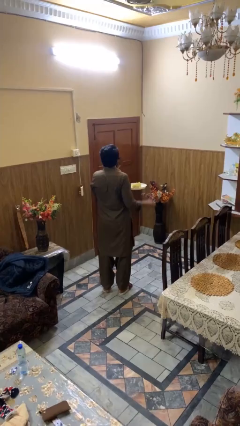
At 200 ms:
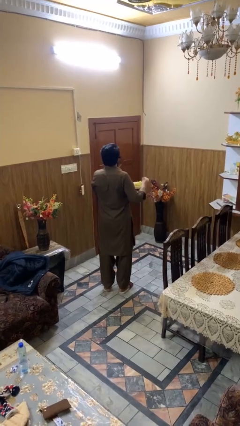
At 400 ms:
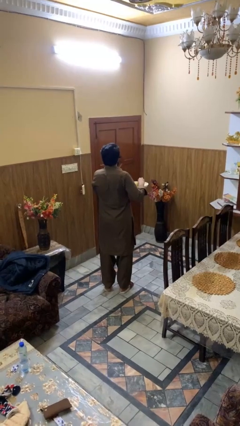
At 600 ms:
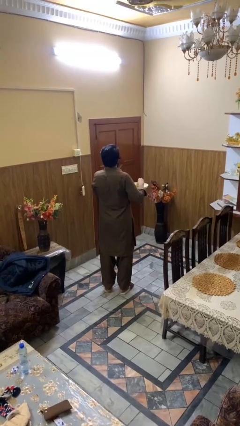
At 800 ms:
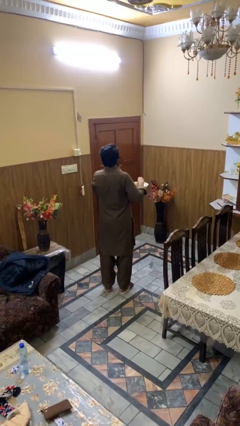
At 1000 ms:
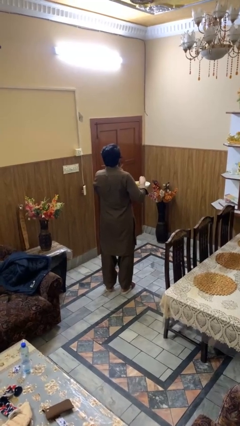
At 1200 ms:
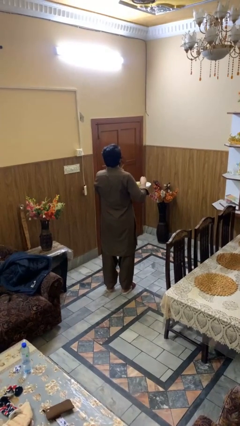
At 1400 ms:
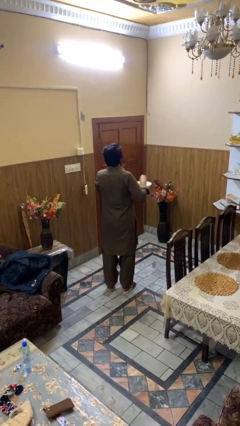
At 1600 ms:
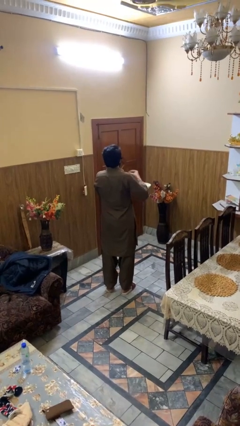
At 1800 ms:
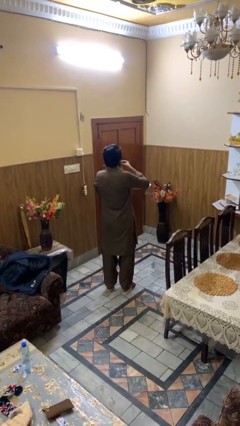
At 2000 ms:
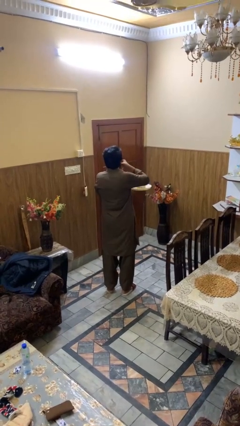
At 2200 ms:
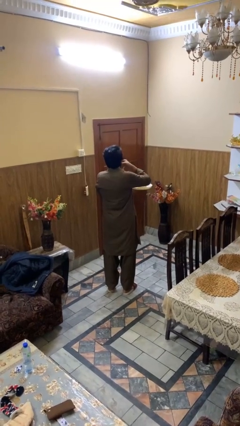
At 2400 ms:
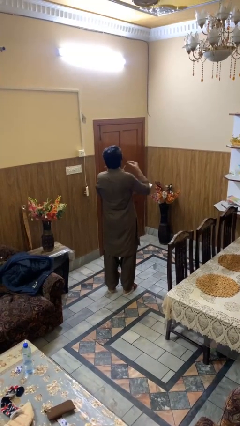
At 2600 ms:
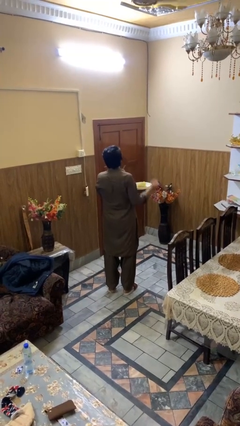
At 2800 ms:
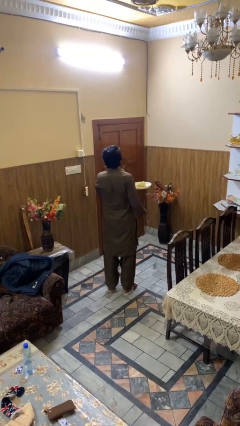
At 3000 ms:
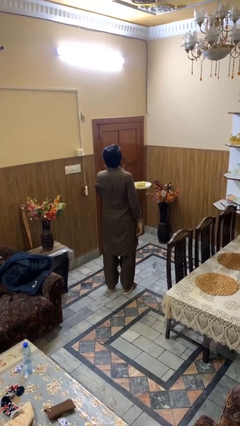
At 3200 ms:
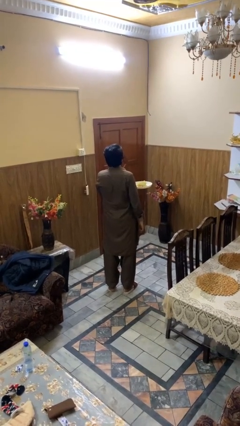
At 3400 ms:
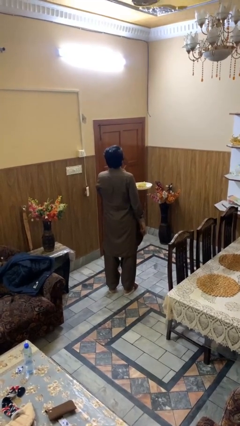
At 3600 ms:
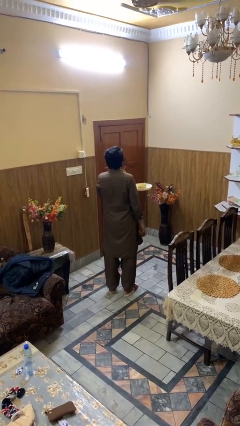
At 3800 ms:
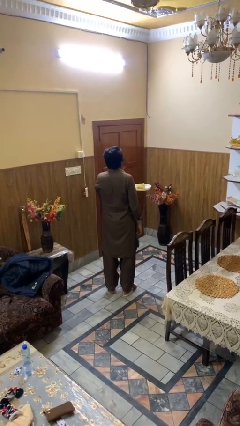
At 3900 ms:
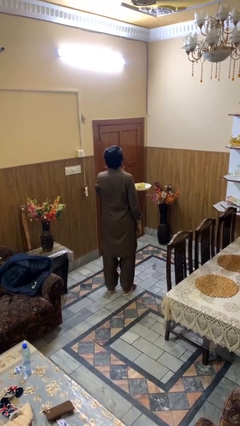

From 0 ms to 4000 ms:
person eats with hands

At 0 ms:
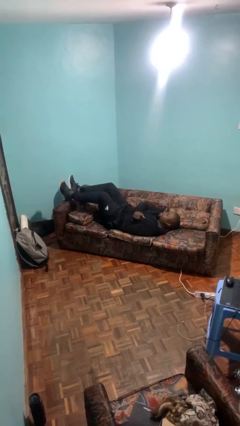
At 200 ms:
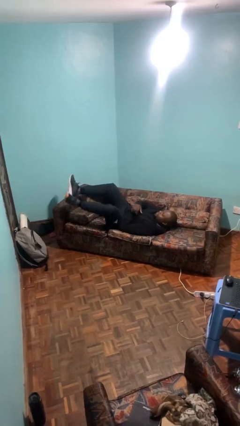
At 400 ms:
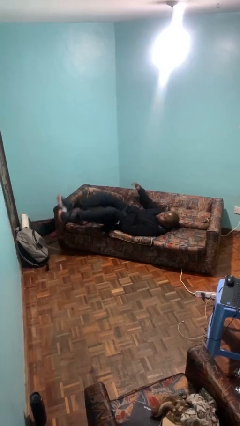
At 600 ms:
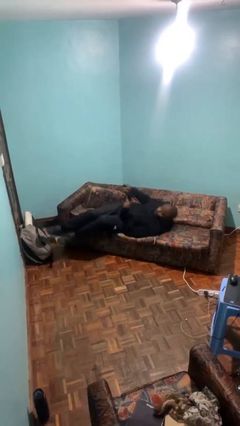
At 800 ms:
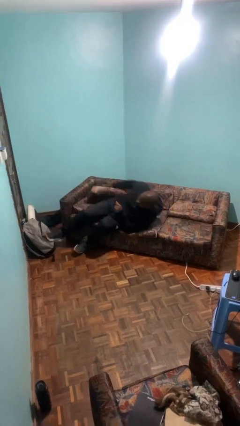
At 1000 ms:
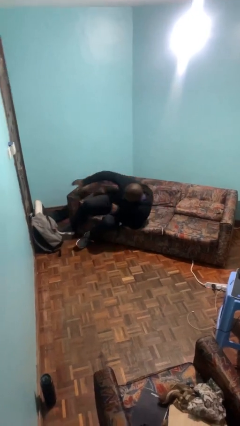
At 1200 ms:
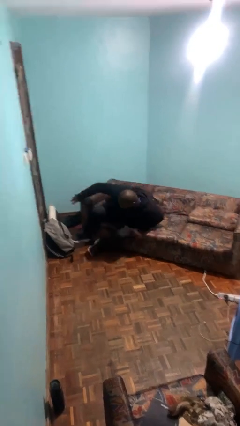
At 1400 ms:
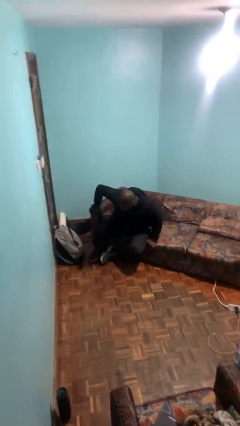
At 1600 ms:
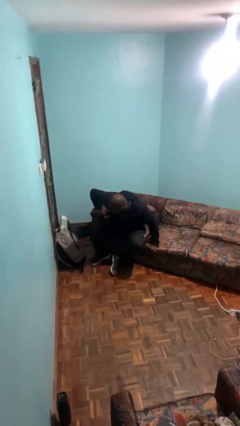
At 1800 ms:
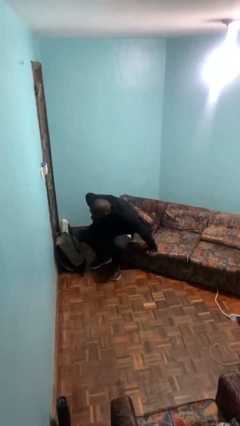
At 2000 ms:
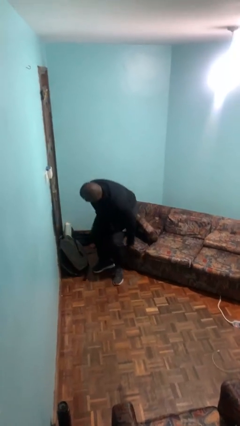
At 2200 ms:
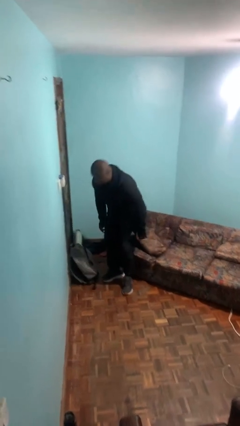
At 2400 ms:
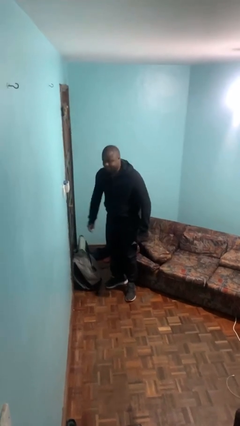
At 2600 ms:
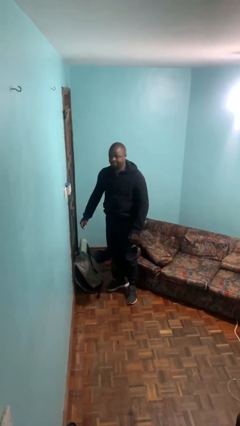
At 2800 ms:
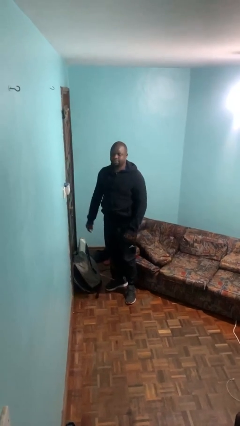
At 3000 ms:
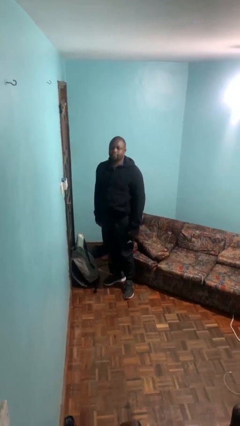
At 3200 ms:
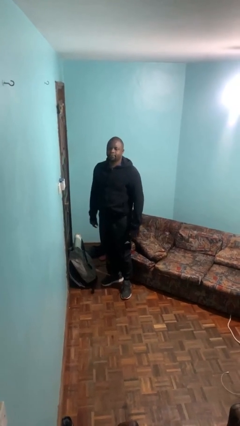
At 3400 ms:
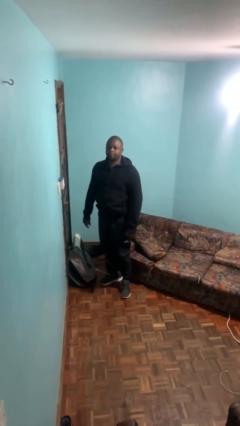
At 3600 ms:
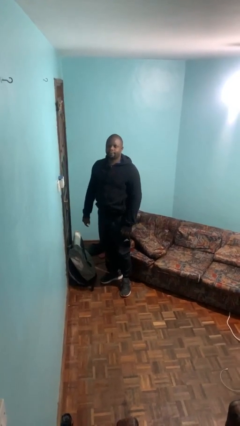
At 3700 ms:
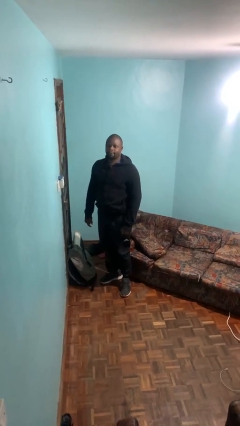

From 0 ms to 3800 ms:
person stands up

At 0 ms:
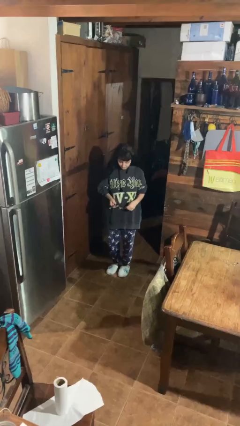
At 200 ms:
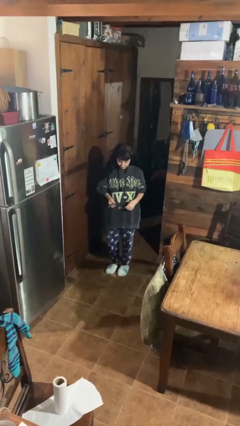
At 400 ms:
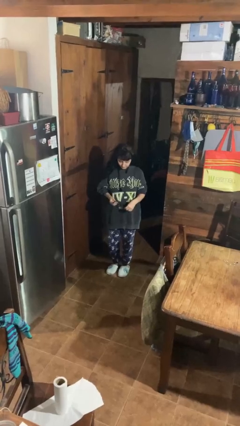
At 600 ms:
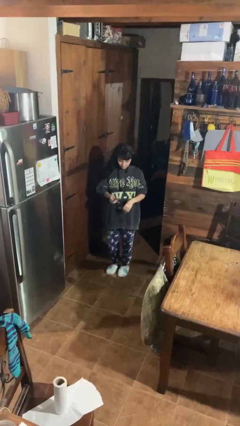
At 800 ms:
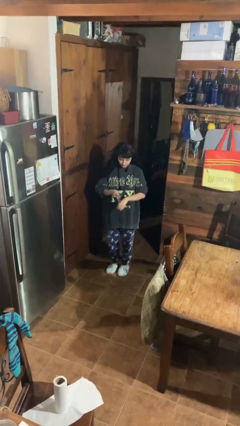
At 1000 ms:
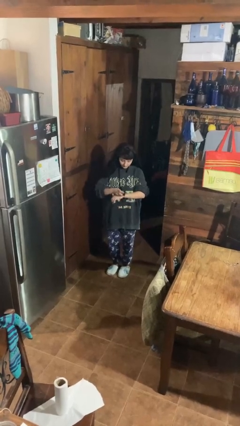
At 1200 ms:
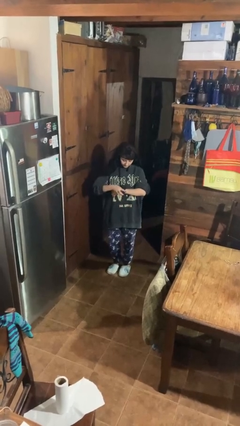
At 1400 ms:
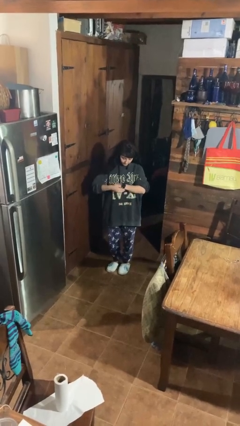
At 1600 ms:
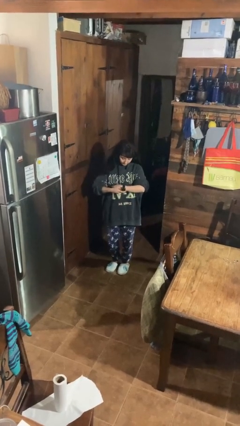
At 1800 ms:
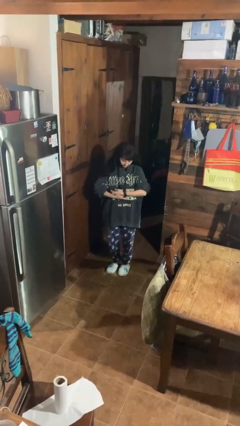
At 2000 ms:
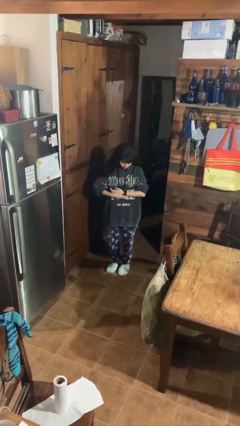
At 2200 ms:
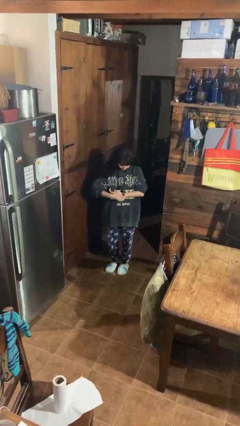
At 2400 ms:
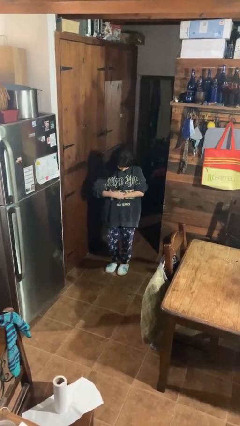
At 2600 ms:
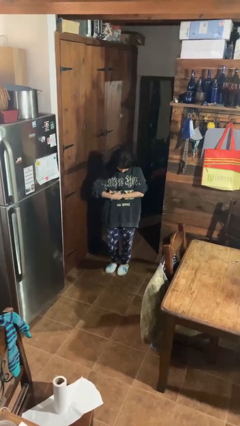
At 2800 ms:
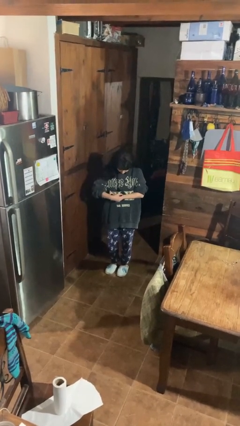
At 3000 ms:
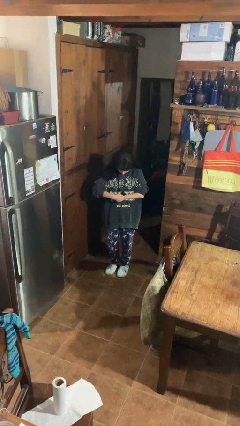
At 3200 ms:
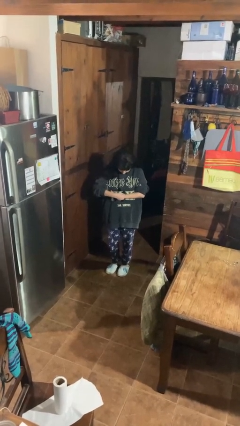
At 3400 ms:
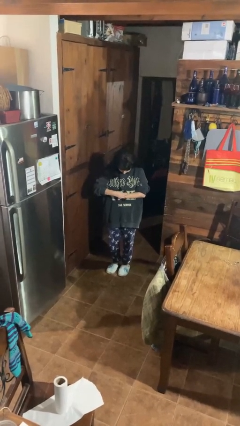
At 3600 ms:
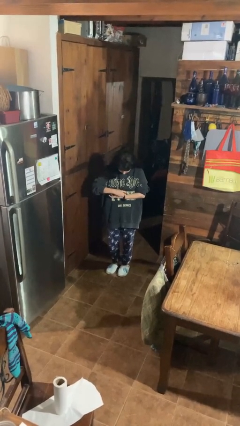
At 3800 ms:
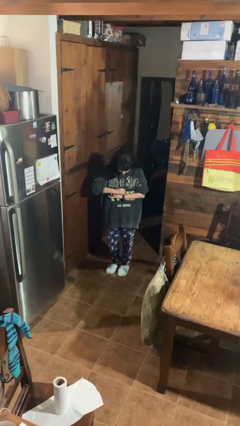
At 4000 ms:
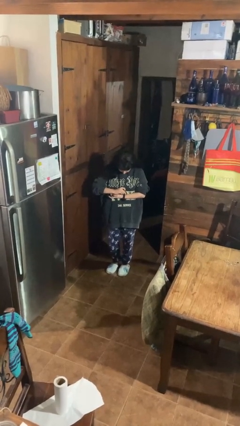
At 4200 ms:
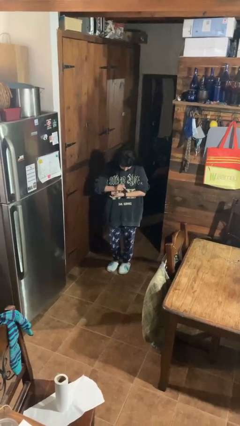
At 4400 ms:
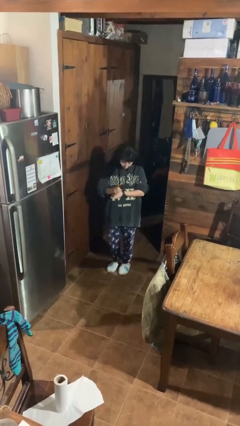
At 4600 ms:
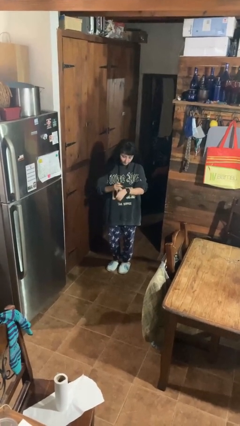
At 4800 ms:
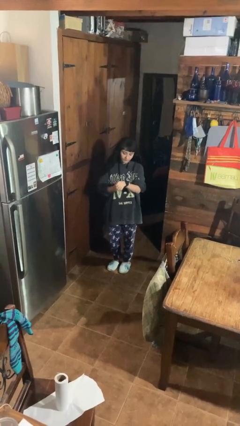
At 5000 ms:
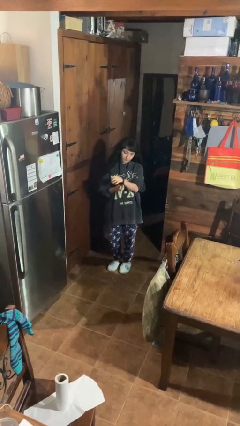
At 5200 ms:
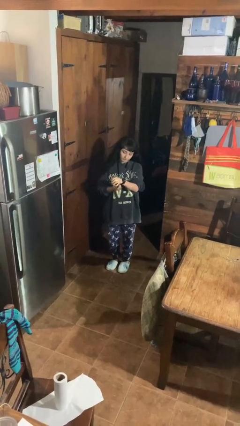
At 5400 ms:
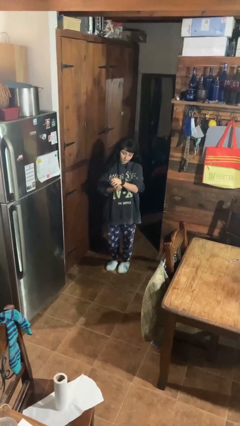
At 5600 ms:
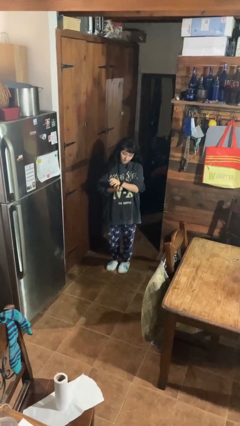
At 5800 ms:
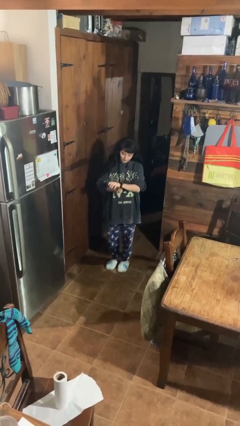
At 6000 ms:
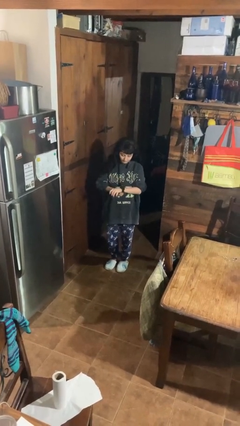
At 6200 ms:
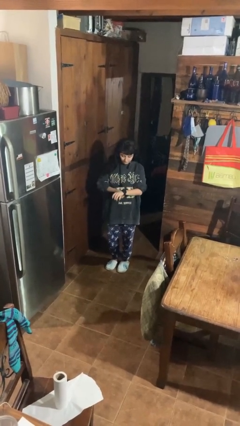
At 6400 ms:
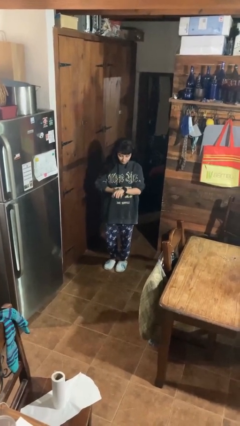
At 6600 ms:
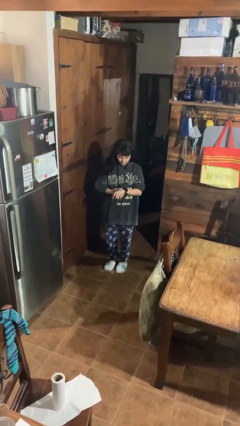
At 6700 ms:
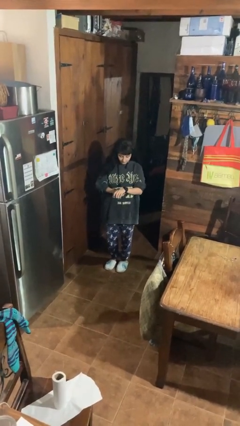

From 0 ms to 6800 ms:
person puts on wristwatch

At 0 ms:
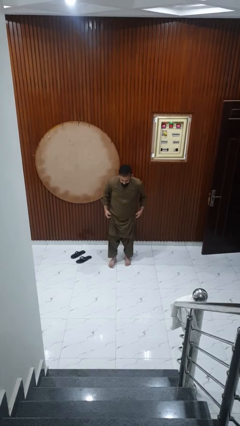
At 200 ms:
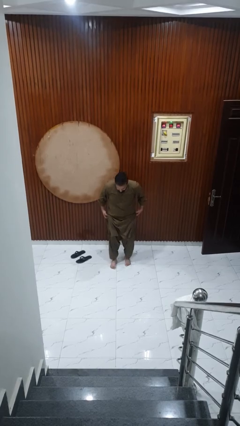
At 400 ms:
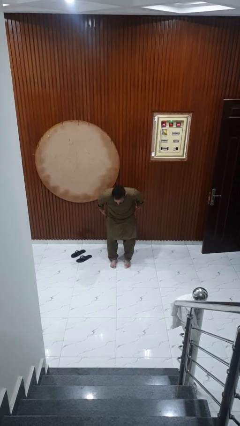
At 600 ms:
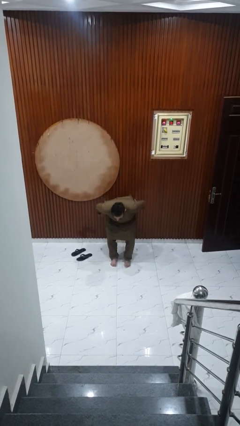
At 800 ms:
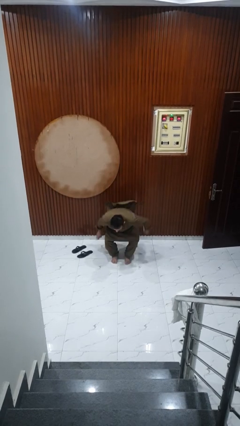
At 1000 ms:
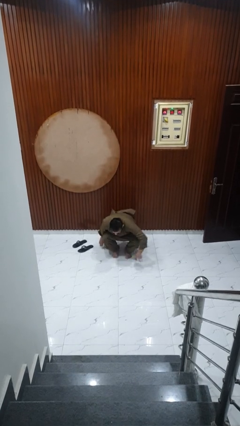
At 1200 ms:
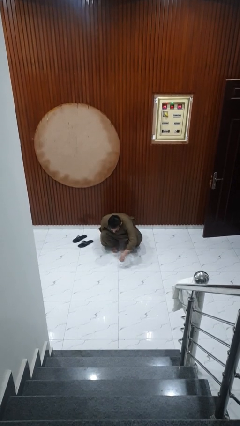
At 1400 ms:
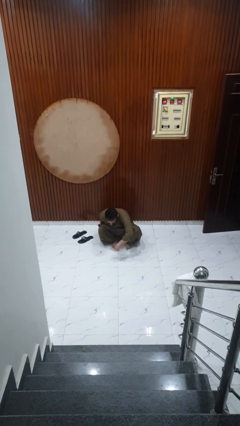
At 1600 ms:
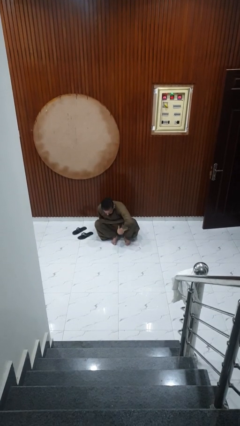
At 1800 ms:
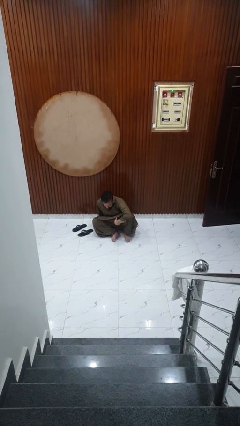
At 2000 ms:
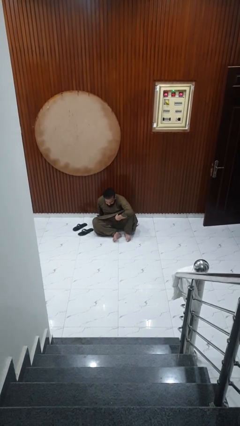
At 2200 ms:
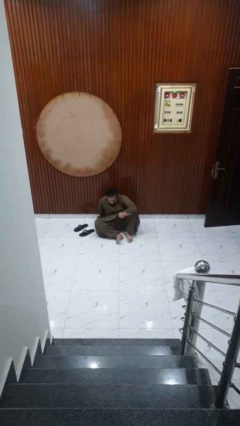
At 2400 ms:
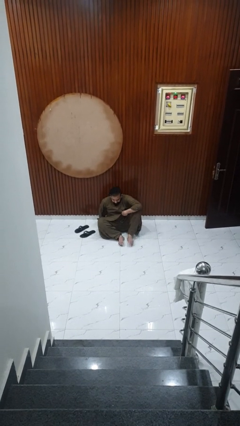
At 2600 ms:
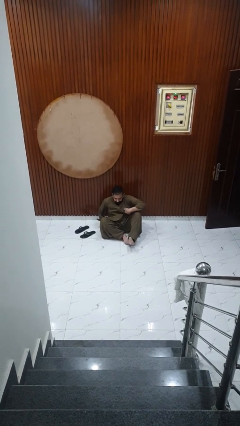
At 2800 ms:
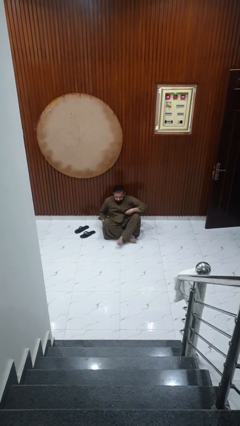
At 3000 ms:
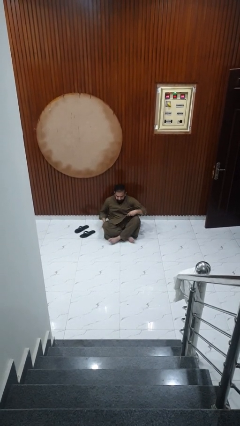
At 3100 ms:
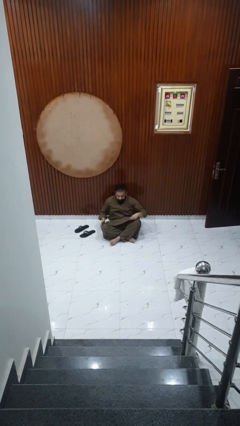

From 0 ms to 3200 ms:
person sits crisscross
